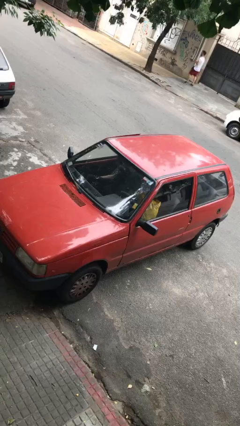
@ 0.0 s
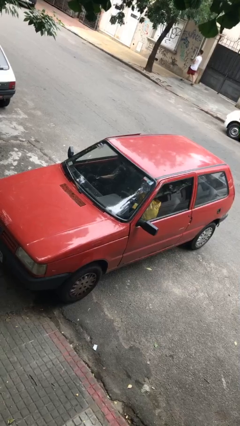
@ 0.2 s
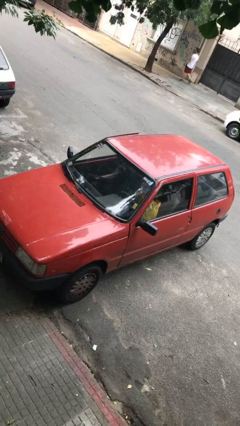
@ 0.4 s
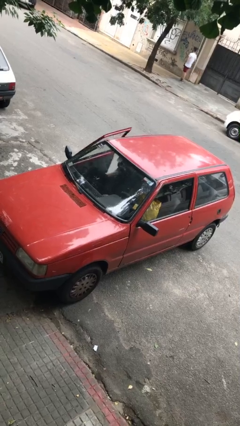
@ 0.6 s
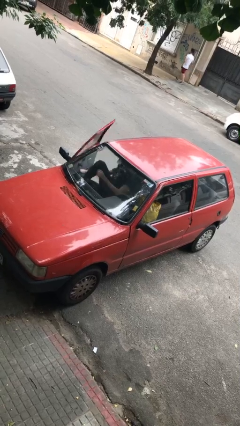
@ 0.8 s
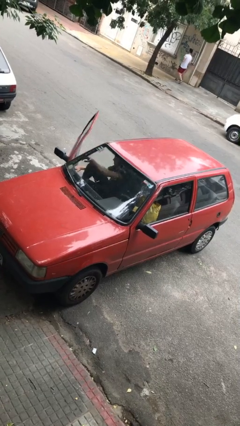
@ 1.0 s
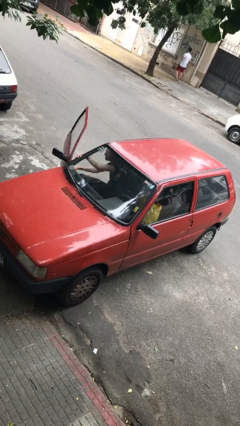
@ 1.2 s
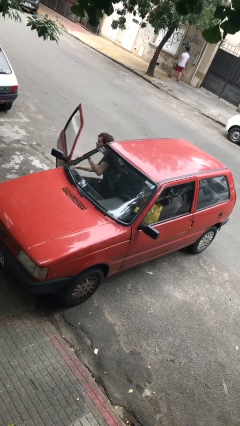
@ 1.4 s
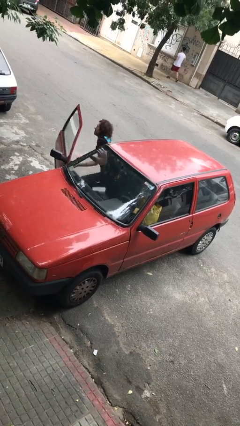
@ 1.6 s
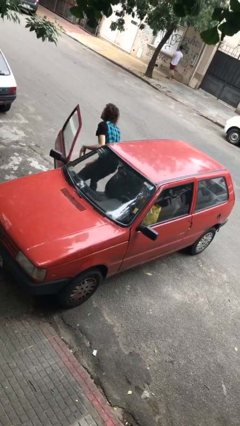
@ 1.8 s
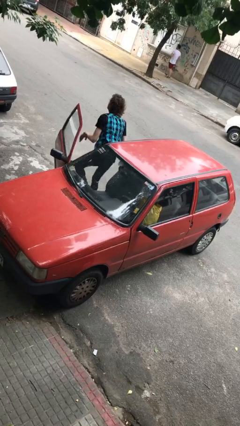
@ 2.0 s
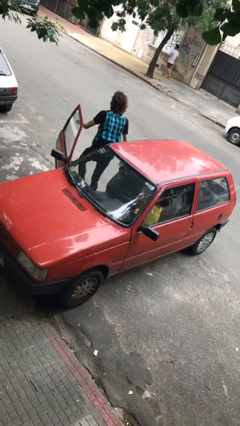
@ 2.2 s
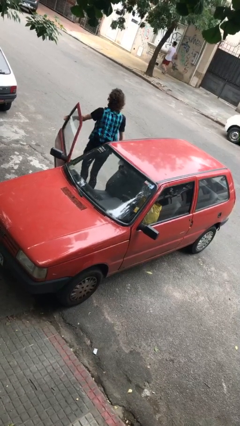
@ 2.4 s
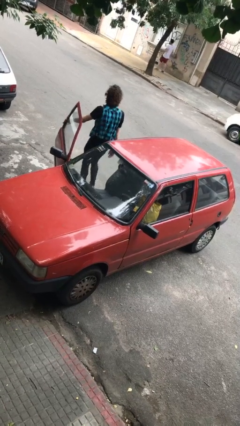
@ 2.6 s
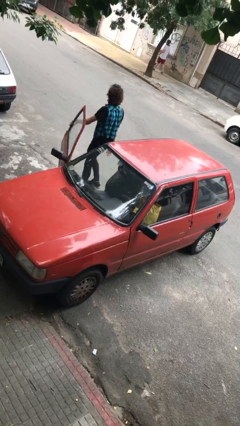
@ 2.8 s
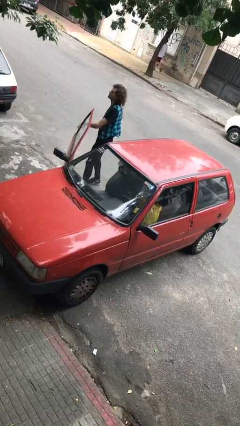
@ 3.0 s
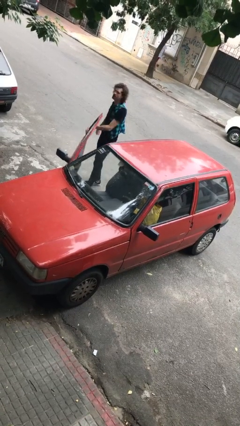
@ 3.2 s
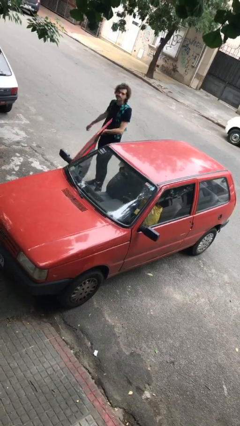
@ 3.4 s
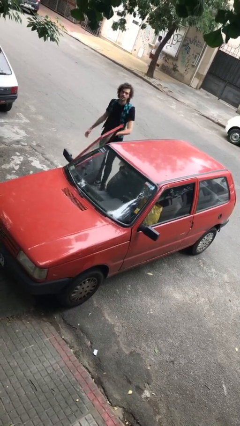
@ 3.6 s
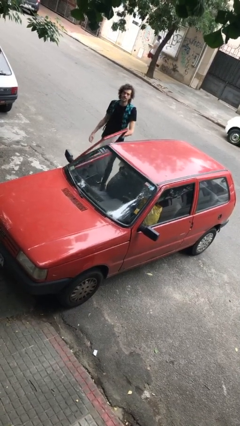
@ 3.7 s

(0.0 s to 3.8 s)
car drops off person

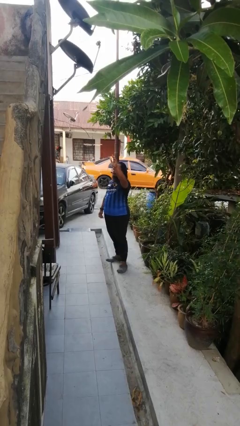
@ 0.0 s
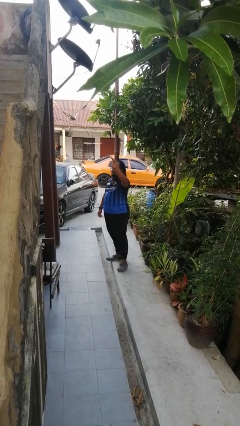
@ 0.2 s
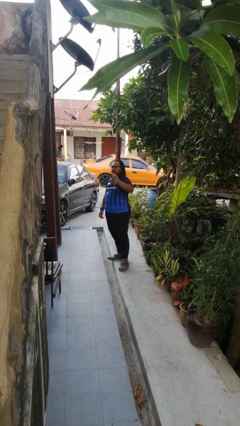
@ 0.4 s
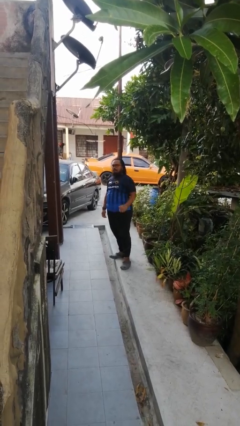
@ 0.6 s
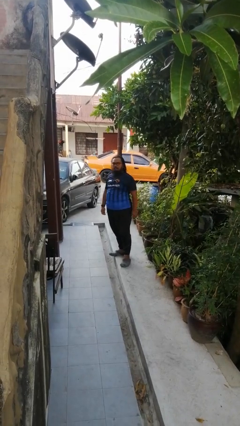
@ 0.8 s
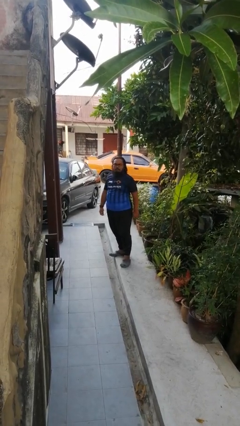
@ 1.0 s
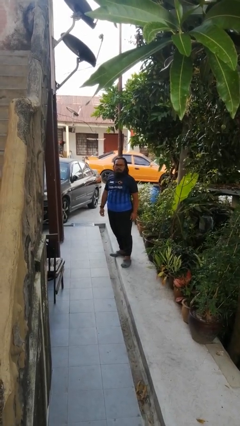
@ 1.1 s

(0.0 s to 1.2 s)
person gestures lower hand

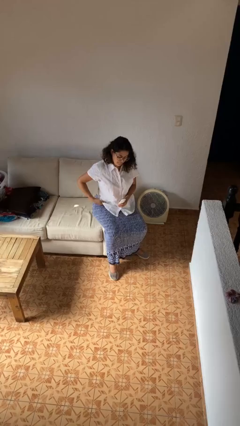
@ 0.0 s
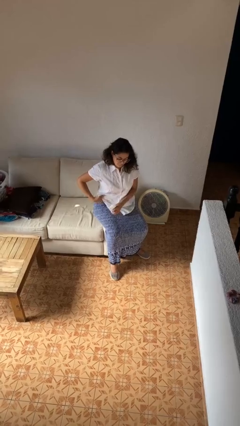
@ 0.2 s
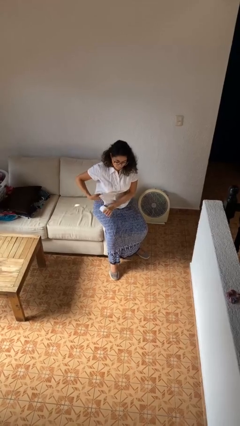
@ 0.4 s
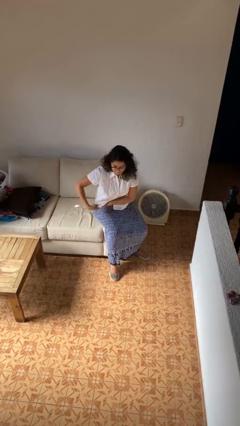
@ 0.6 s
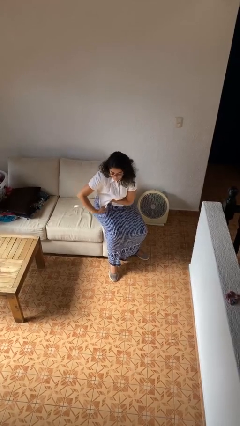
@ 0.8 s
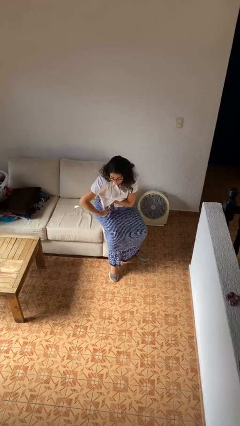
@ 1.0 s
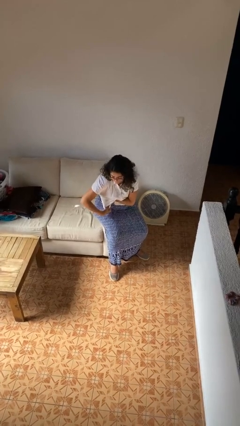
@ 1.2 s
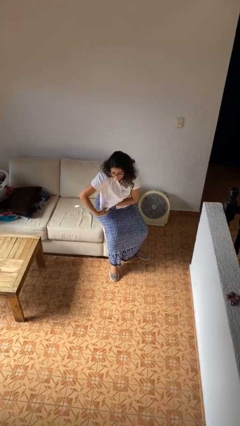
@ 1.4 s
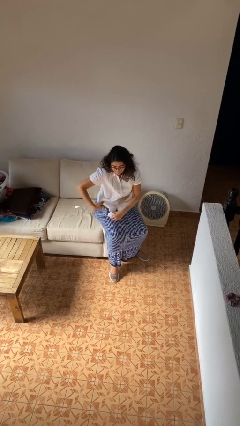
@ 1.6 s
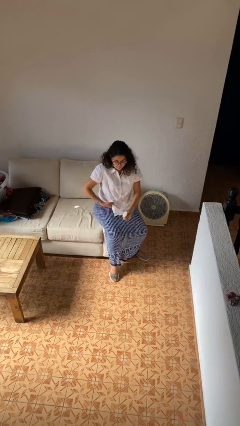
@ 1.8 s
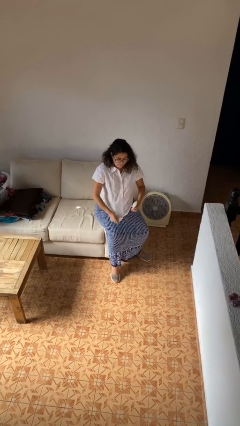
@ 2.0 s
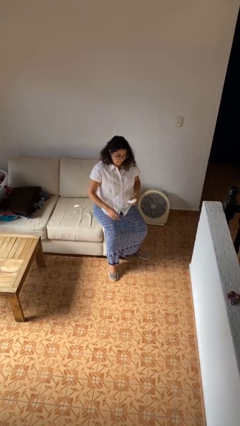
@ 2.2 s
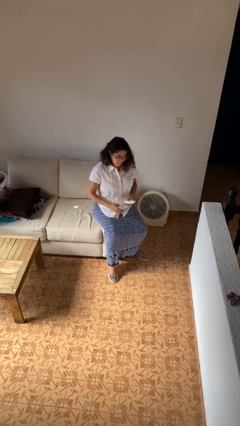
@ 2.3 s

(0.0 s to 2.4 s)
person applies deodorant

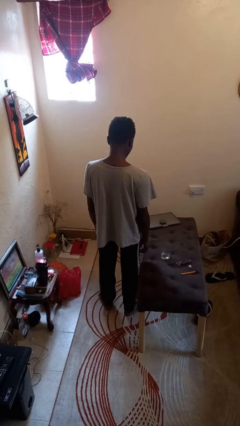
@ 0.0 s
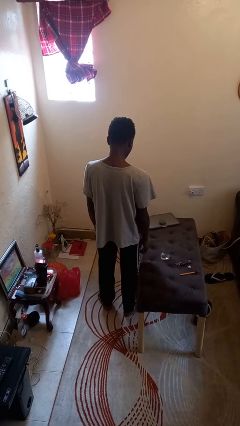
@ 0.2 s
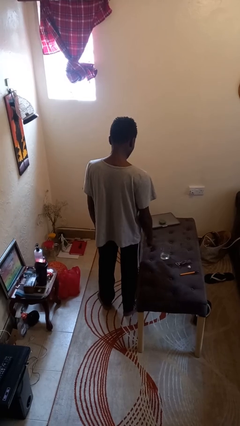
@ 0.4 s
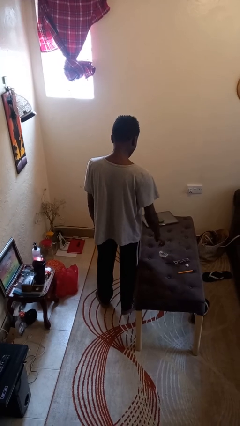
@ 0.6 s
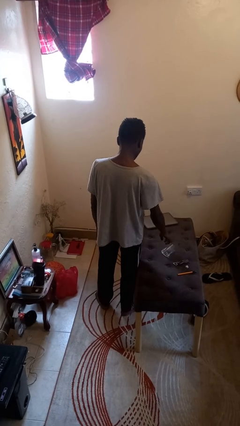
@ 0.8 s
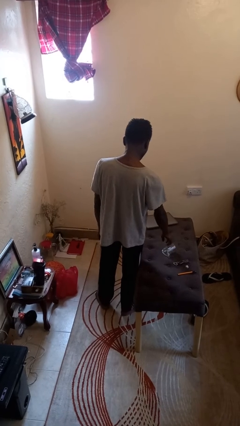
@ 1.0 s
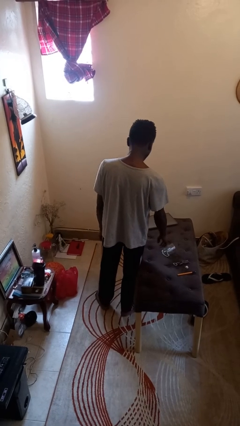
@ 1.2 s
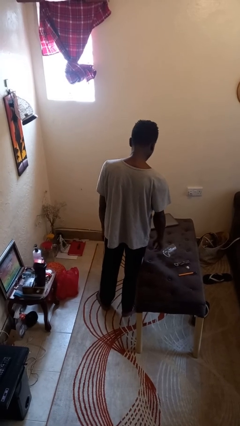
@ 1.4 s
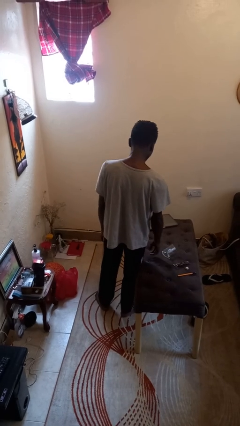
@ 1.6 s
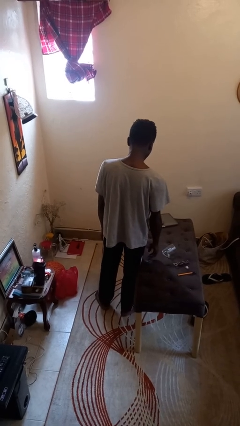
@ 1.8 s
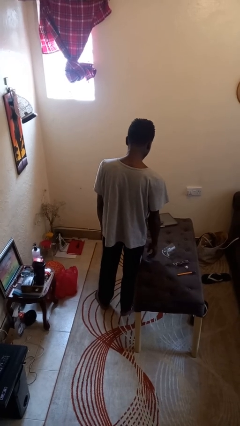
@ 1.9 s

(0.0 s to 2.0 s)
person knocks over glass

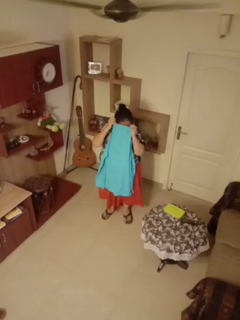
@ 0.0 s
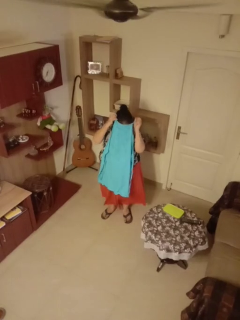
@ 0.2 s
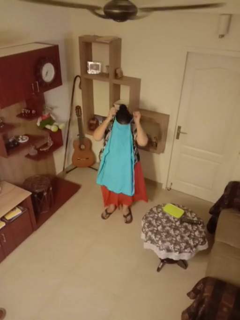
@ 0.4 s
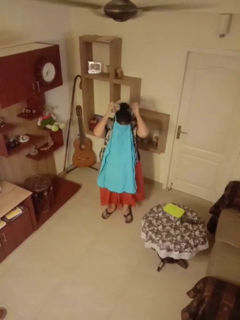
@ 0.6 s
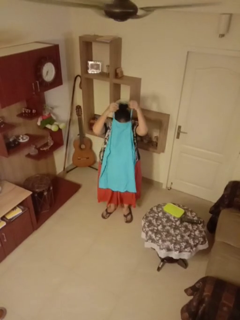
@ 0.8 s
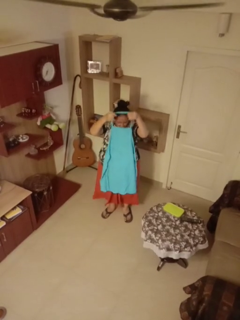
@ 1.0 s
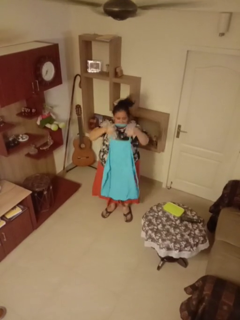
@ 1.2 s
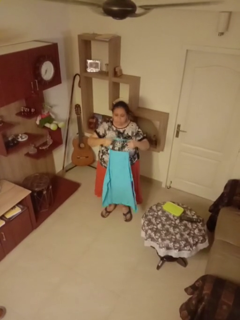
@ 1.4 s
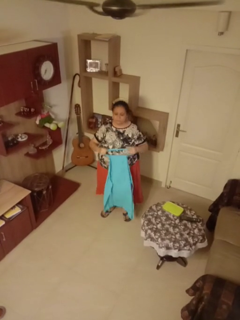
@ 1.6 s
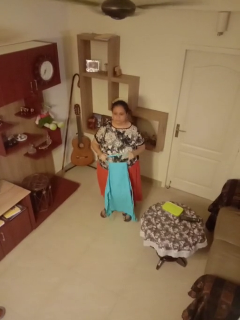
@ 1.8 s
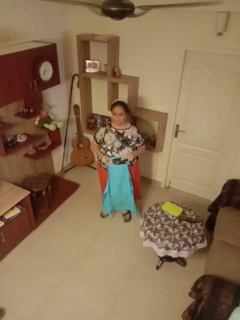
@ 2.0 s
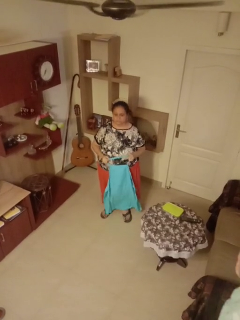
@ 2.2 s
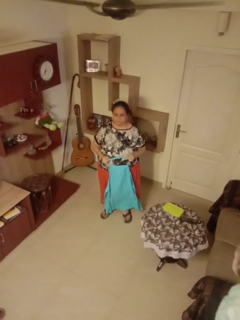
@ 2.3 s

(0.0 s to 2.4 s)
person takes off apron

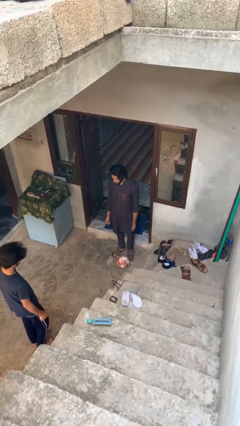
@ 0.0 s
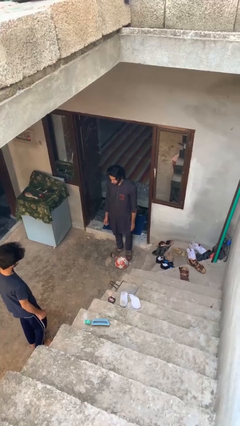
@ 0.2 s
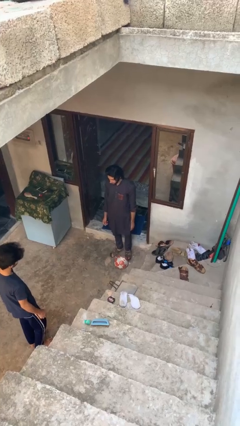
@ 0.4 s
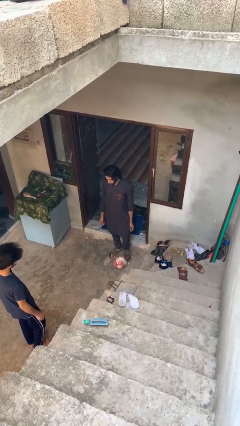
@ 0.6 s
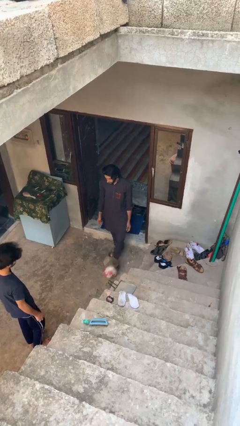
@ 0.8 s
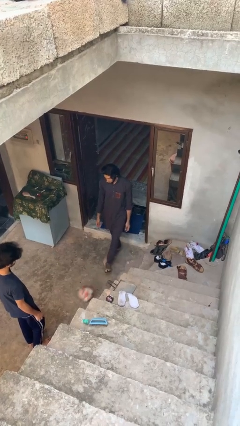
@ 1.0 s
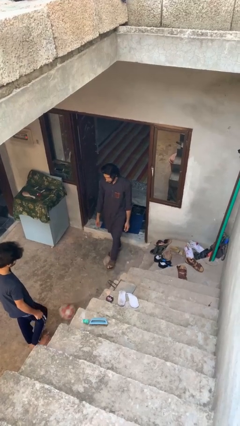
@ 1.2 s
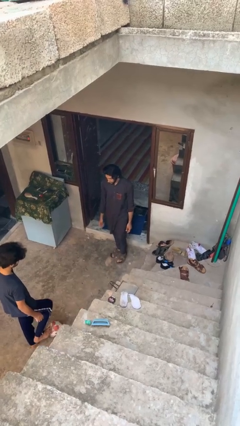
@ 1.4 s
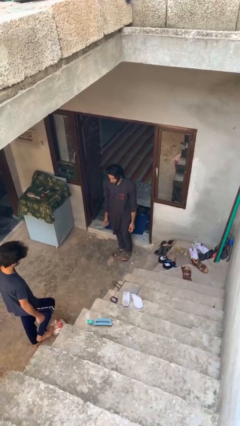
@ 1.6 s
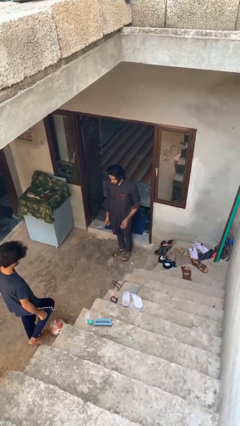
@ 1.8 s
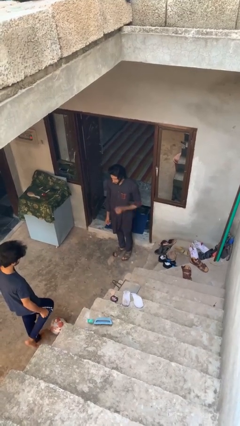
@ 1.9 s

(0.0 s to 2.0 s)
person kicks object to person

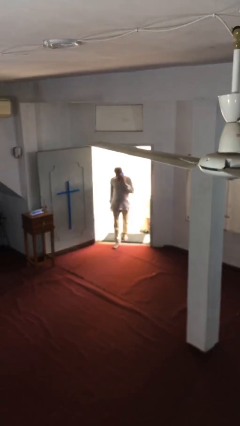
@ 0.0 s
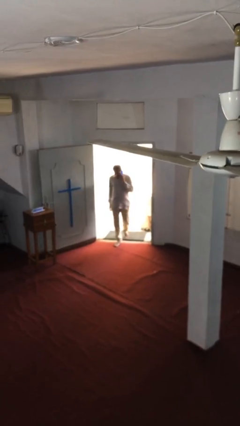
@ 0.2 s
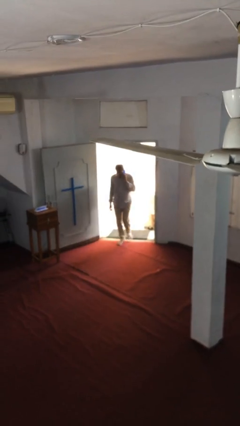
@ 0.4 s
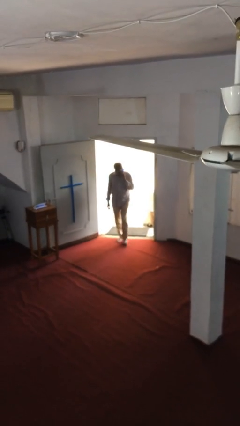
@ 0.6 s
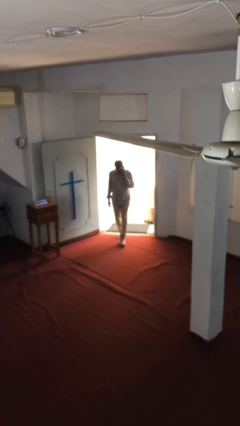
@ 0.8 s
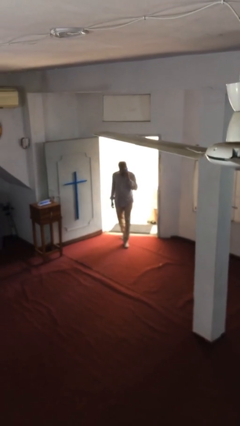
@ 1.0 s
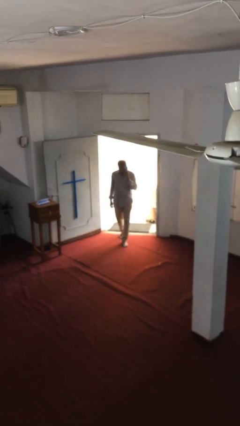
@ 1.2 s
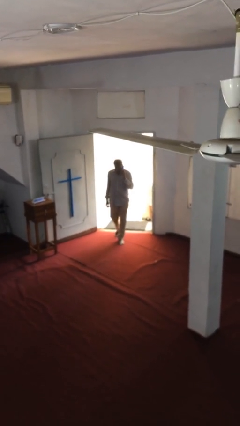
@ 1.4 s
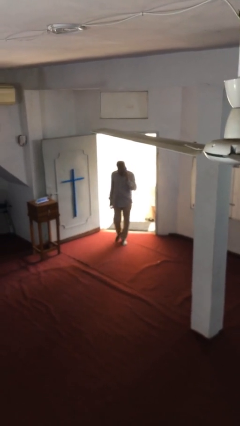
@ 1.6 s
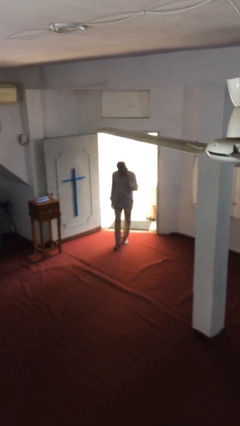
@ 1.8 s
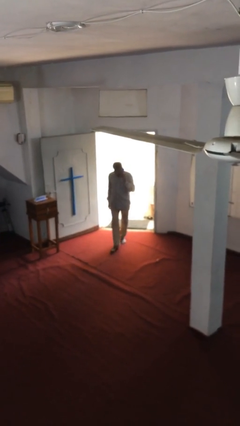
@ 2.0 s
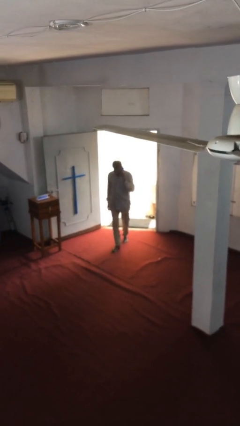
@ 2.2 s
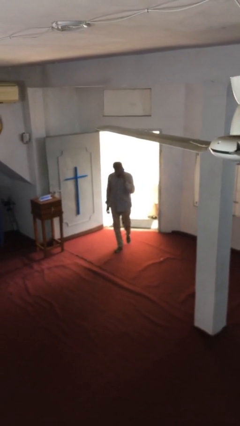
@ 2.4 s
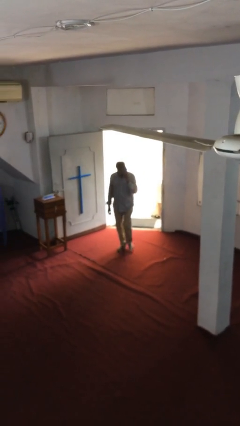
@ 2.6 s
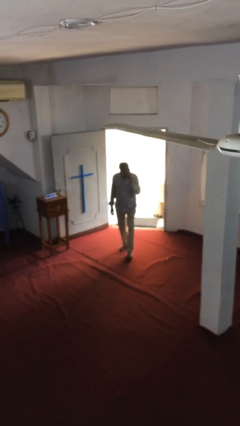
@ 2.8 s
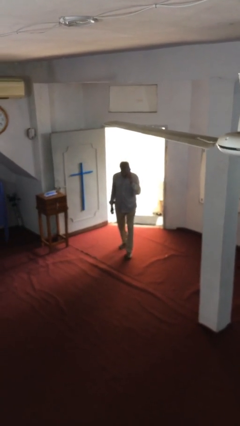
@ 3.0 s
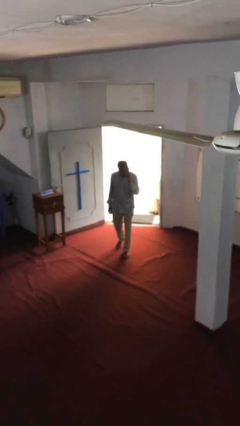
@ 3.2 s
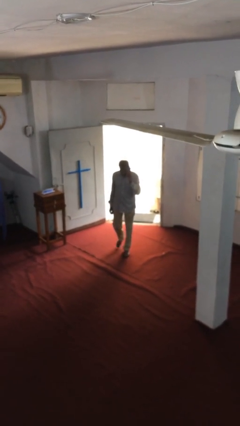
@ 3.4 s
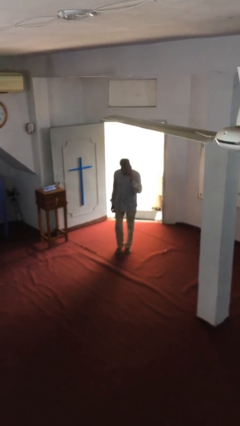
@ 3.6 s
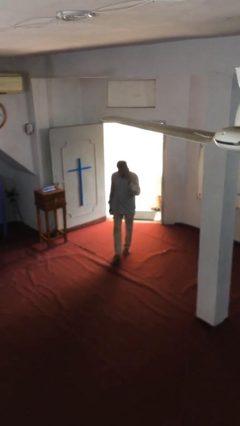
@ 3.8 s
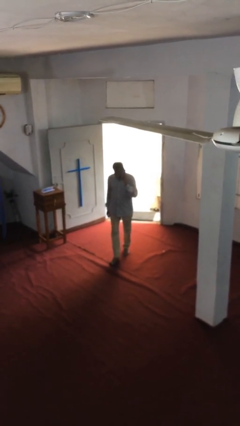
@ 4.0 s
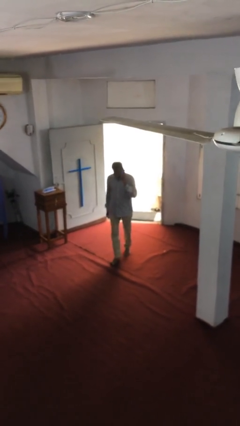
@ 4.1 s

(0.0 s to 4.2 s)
person enters scene through structure
